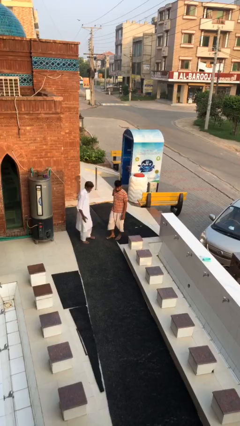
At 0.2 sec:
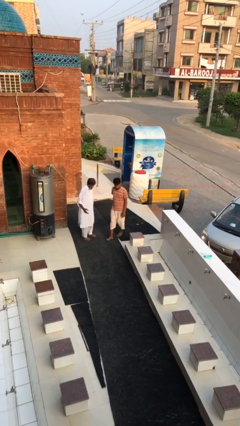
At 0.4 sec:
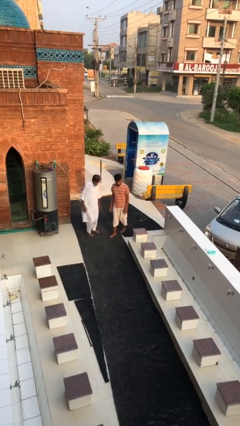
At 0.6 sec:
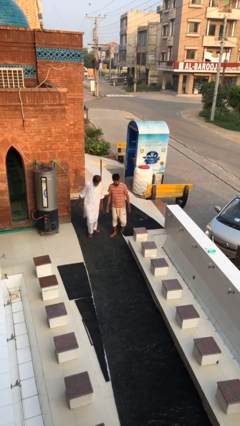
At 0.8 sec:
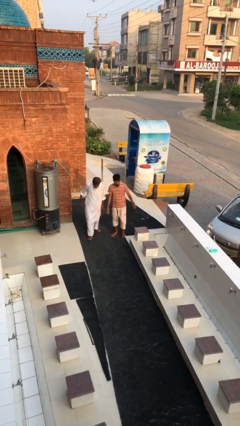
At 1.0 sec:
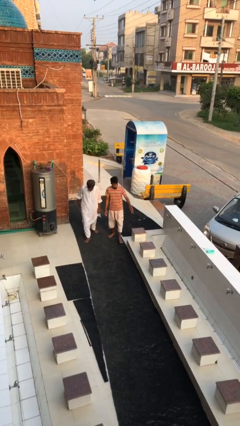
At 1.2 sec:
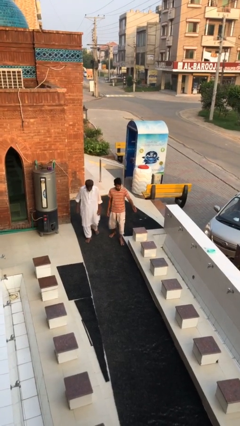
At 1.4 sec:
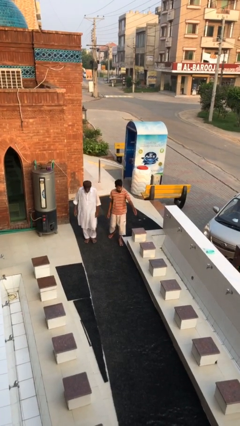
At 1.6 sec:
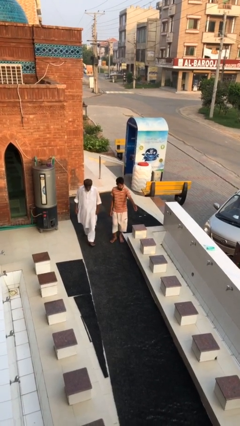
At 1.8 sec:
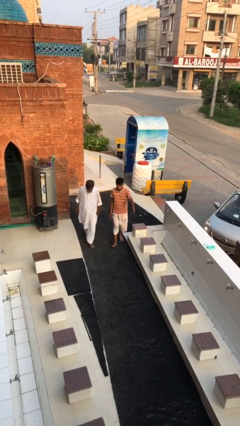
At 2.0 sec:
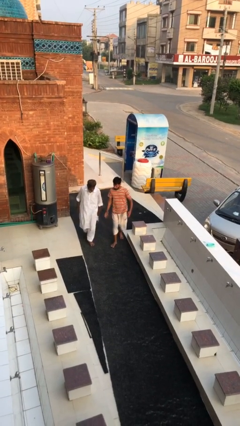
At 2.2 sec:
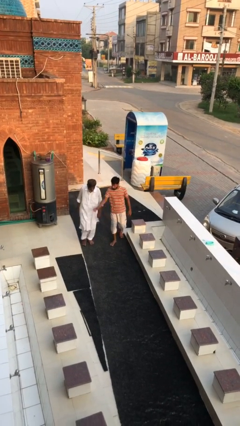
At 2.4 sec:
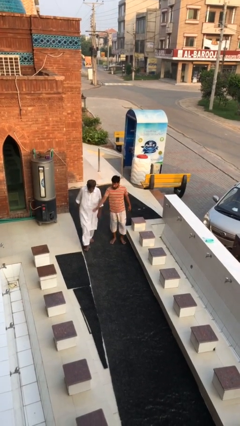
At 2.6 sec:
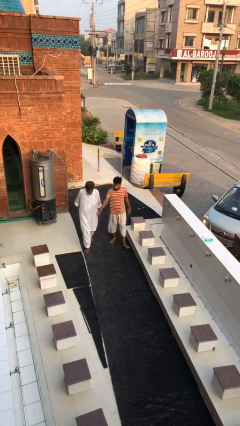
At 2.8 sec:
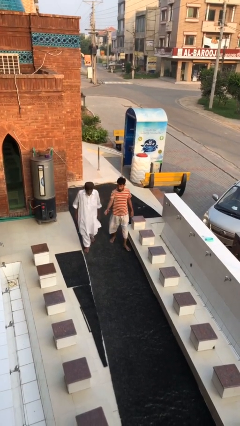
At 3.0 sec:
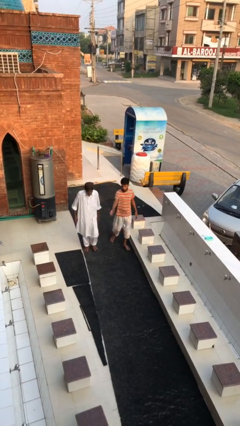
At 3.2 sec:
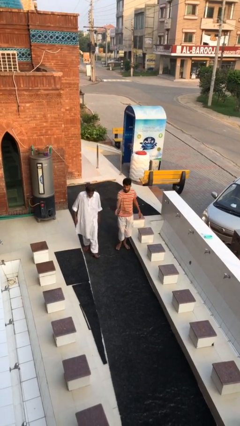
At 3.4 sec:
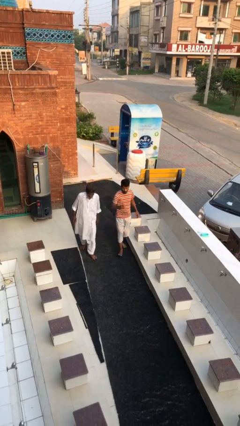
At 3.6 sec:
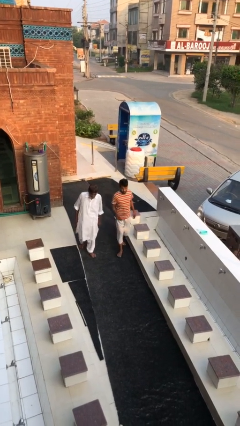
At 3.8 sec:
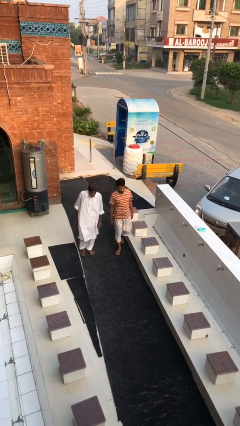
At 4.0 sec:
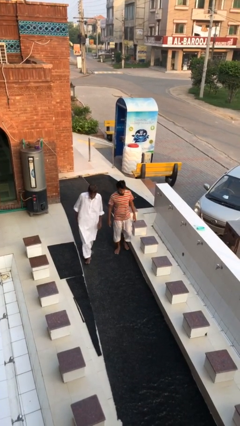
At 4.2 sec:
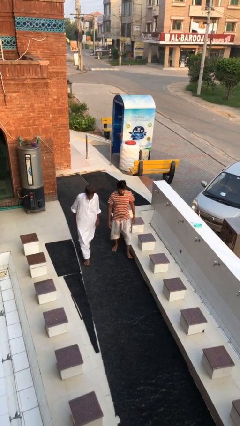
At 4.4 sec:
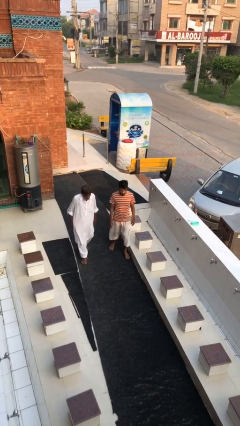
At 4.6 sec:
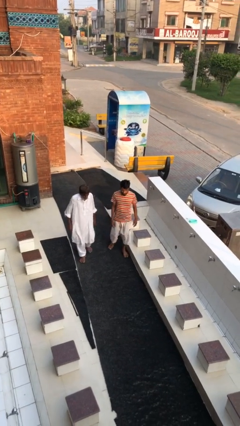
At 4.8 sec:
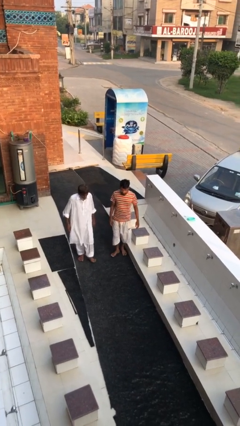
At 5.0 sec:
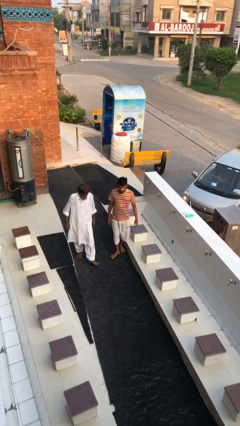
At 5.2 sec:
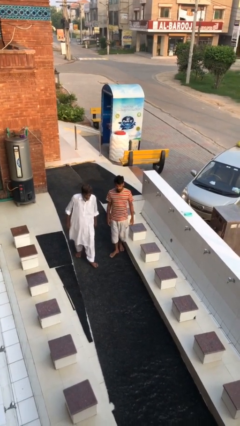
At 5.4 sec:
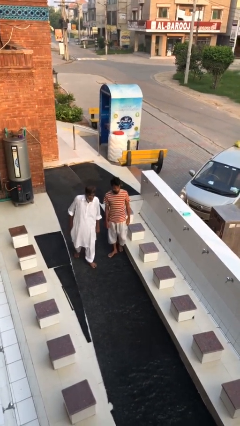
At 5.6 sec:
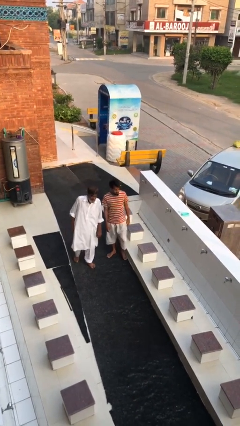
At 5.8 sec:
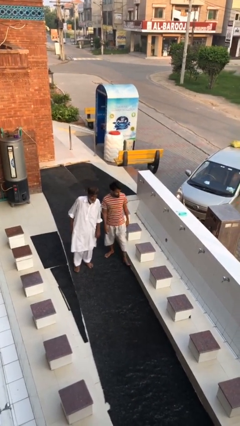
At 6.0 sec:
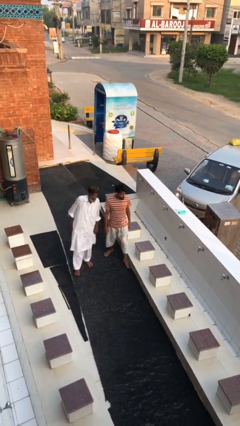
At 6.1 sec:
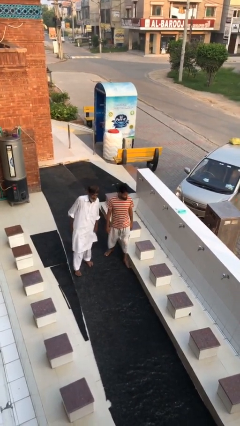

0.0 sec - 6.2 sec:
person talks to person

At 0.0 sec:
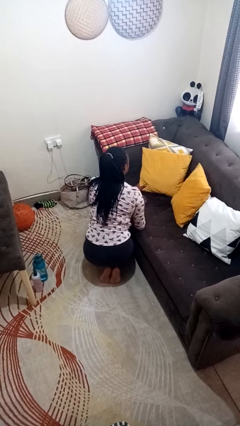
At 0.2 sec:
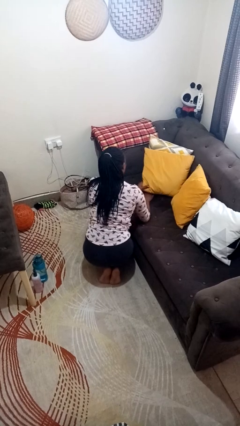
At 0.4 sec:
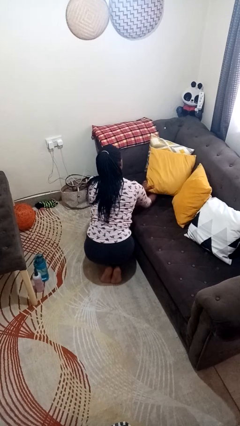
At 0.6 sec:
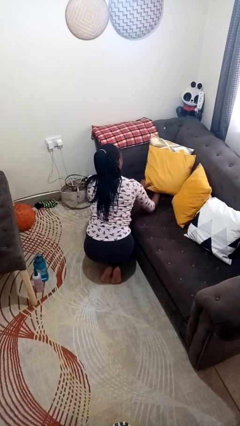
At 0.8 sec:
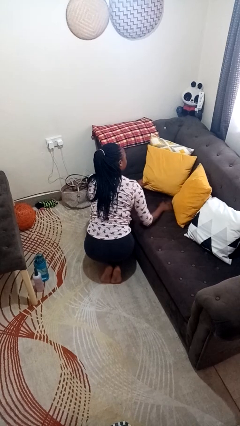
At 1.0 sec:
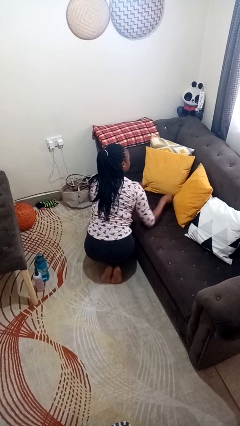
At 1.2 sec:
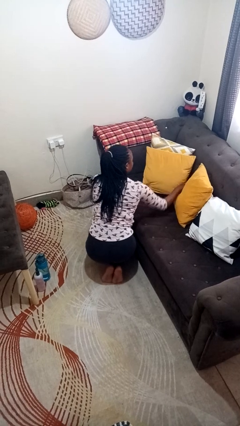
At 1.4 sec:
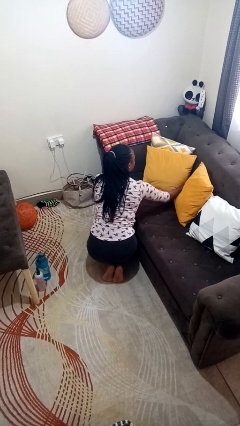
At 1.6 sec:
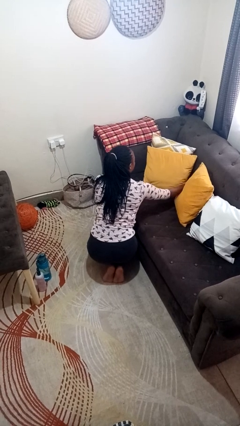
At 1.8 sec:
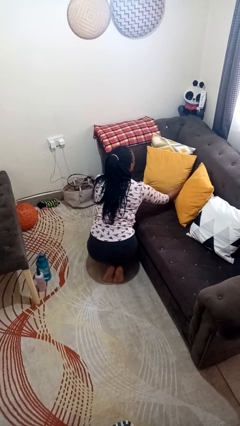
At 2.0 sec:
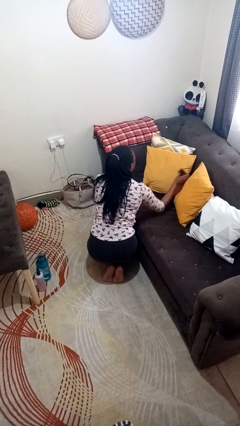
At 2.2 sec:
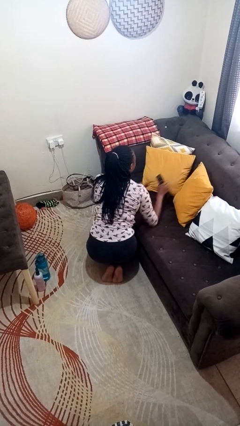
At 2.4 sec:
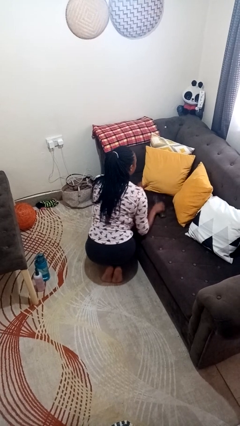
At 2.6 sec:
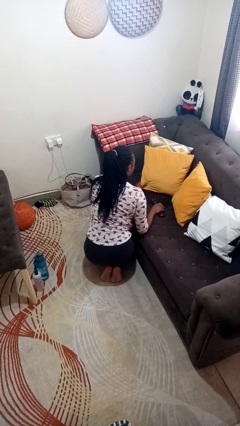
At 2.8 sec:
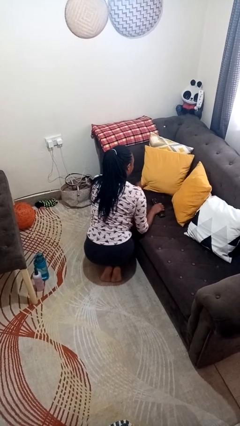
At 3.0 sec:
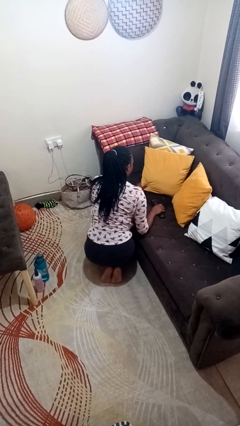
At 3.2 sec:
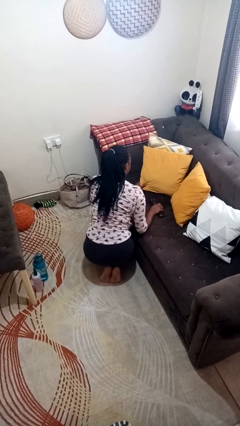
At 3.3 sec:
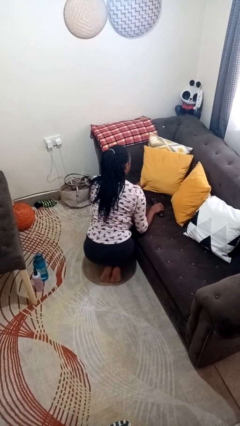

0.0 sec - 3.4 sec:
person searches in couch

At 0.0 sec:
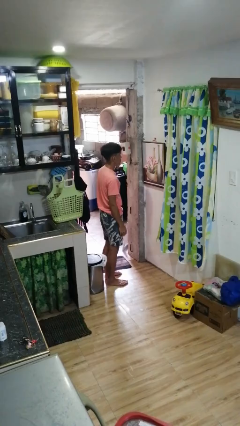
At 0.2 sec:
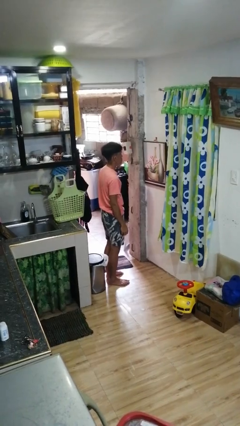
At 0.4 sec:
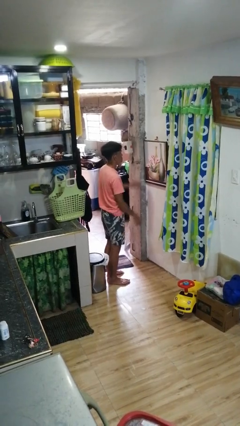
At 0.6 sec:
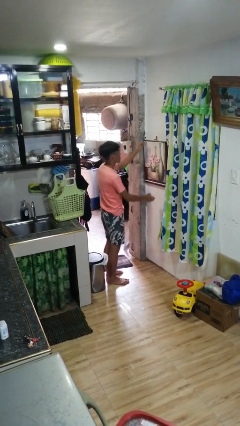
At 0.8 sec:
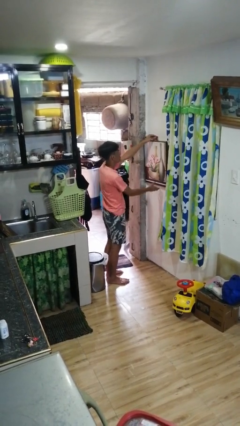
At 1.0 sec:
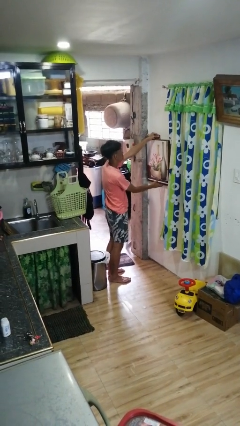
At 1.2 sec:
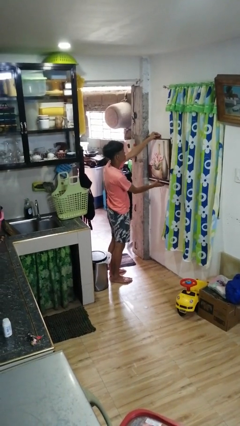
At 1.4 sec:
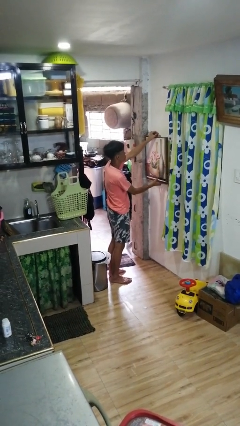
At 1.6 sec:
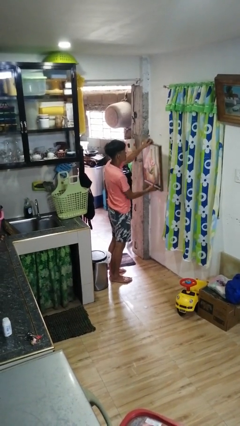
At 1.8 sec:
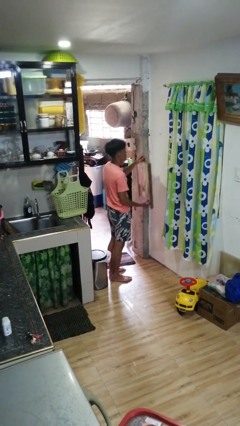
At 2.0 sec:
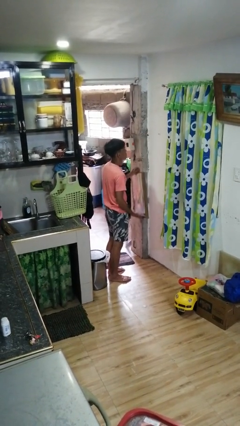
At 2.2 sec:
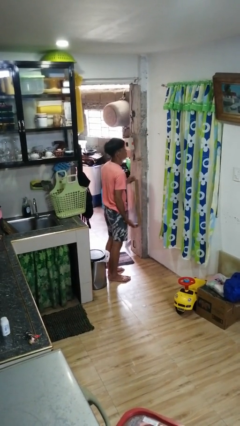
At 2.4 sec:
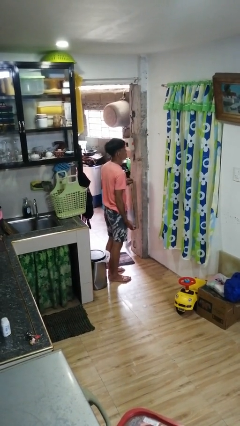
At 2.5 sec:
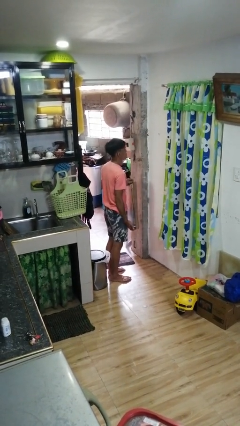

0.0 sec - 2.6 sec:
person takes down picture frame

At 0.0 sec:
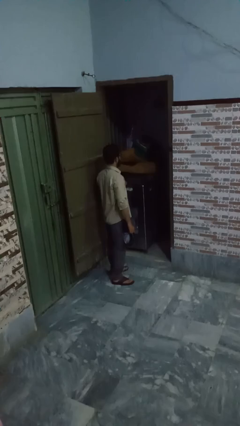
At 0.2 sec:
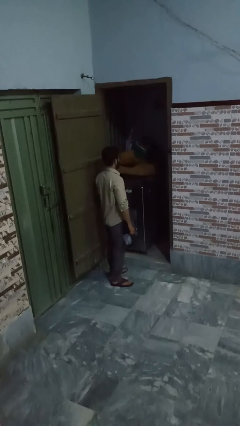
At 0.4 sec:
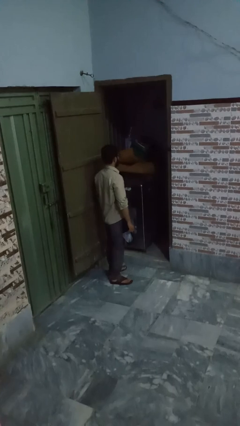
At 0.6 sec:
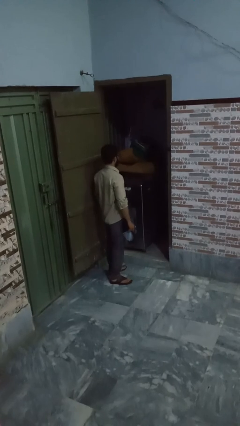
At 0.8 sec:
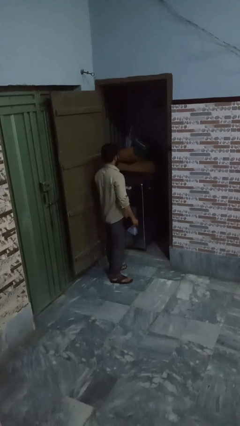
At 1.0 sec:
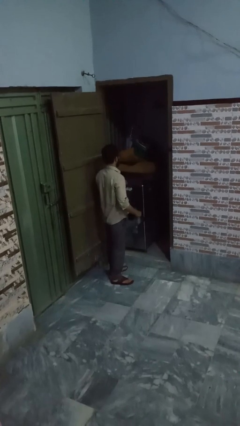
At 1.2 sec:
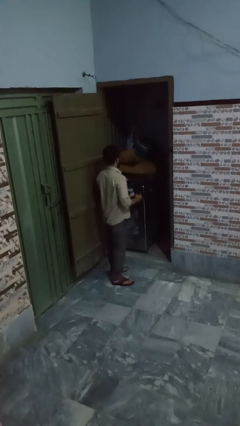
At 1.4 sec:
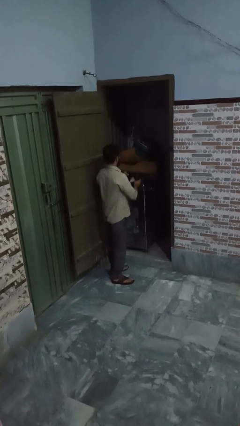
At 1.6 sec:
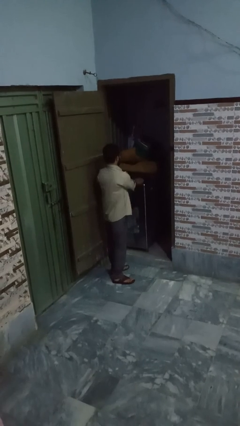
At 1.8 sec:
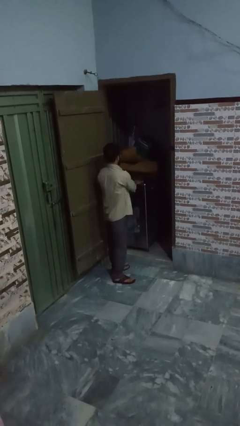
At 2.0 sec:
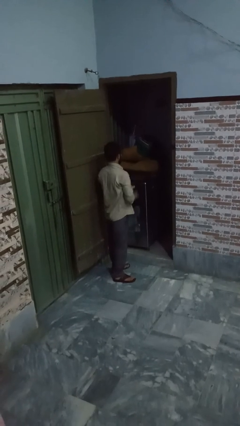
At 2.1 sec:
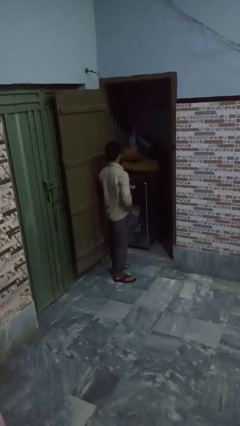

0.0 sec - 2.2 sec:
person loads dryer

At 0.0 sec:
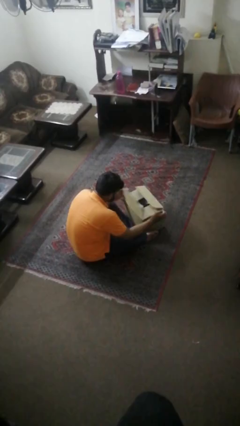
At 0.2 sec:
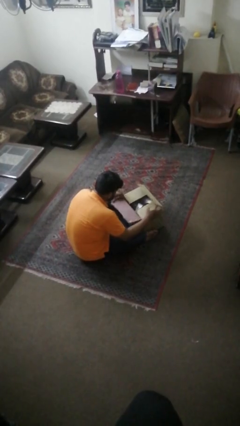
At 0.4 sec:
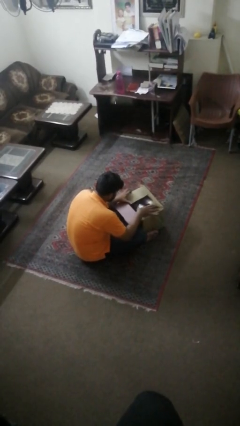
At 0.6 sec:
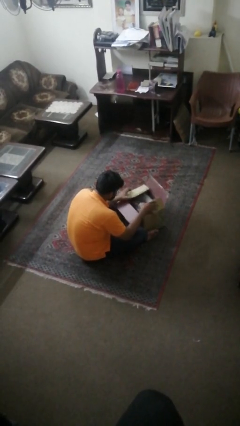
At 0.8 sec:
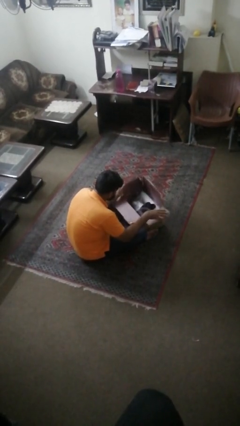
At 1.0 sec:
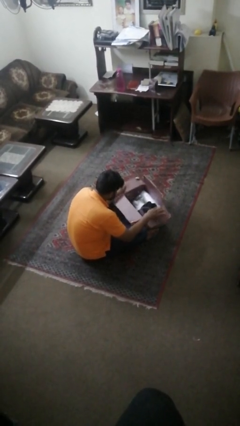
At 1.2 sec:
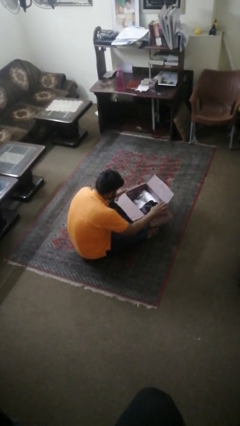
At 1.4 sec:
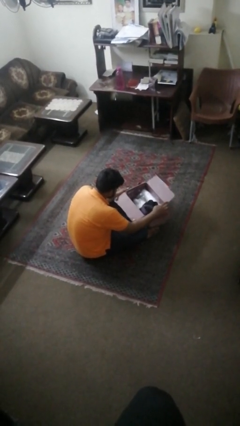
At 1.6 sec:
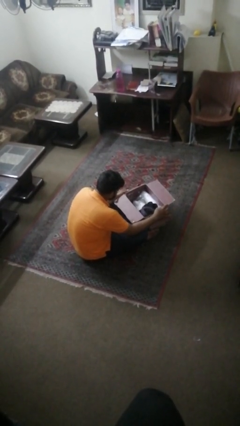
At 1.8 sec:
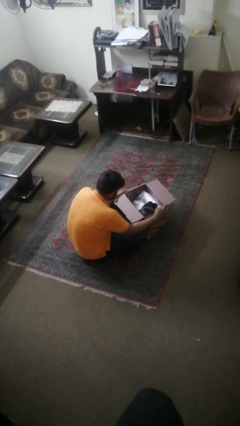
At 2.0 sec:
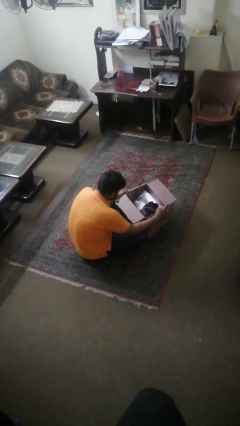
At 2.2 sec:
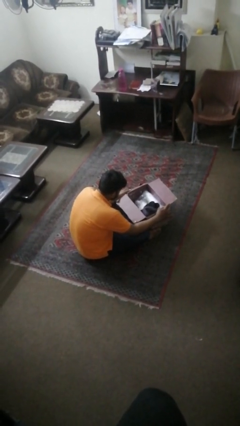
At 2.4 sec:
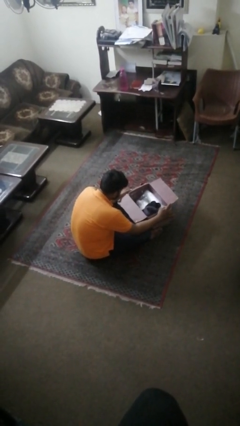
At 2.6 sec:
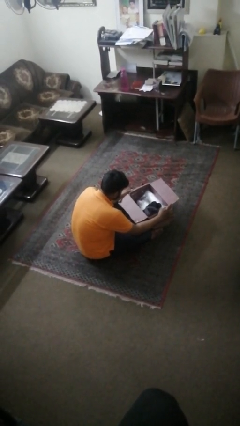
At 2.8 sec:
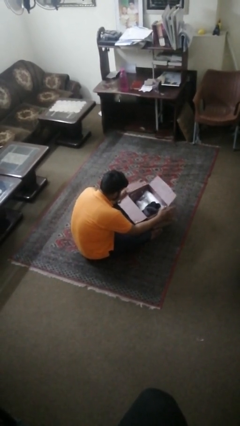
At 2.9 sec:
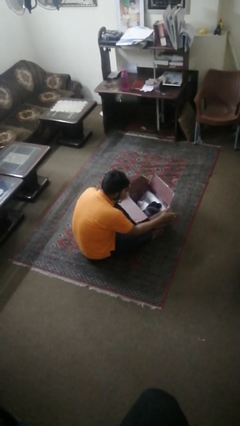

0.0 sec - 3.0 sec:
person opens box
